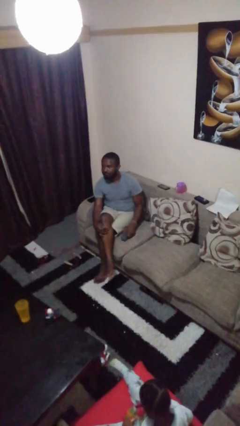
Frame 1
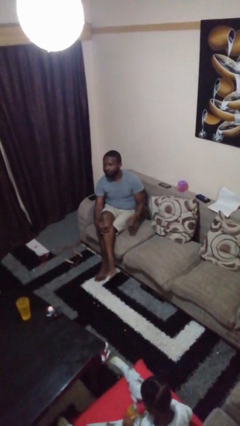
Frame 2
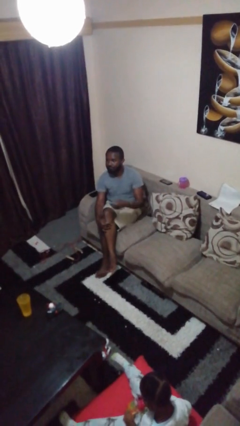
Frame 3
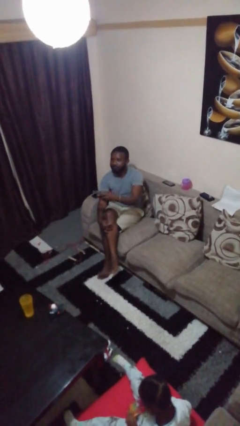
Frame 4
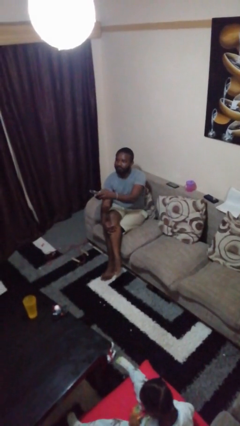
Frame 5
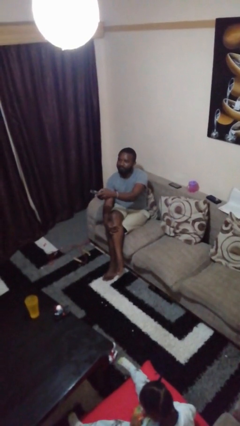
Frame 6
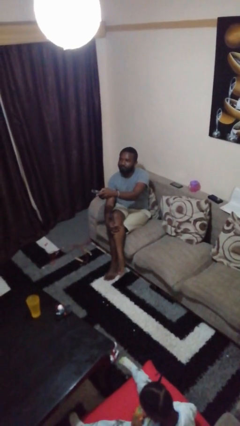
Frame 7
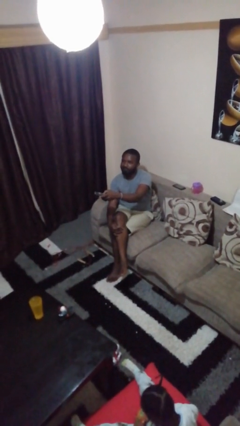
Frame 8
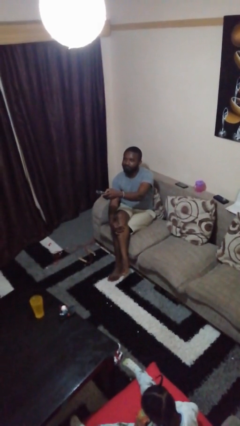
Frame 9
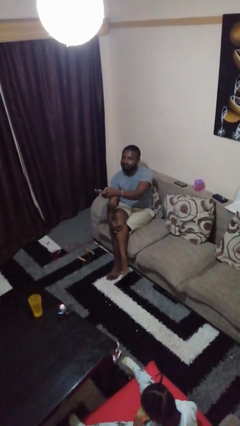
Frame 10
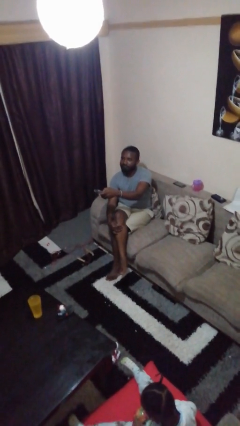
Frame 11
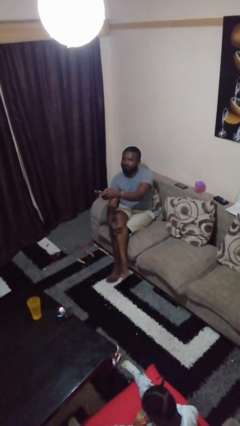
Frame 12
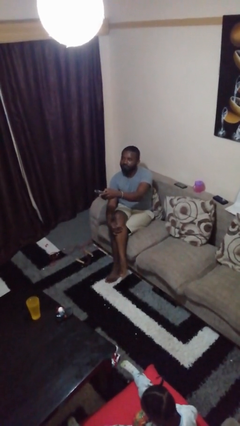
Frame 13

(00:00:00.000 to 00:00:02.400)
person uses television remote

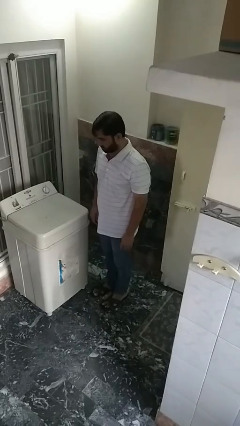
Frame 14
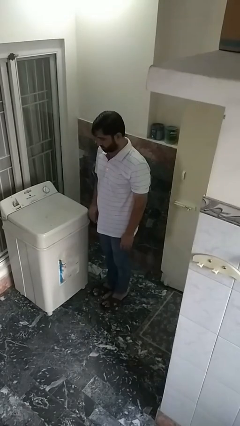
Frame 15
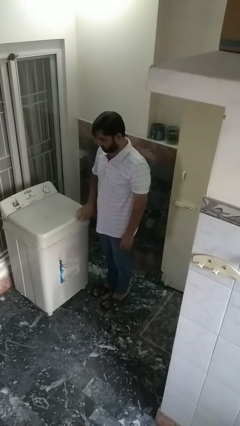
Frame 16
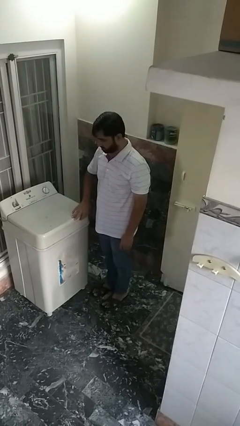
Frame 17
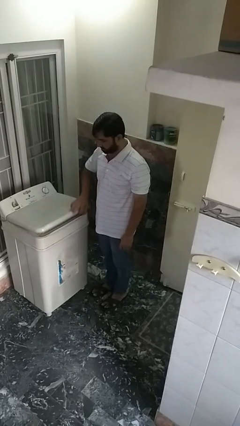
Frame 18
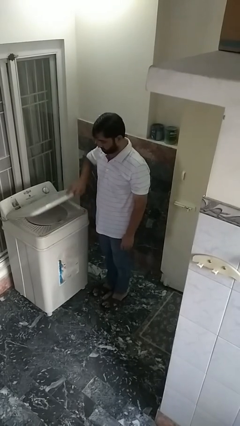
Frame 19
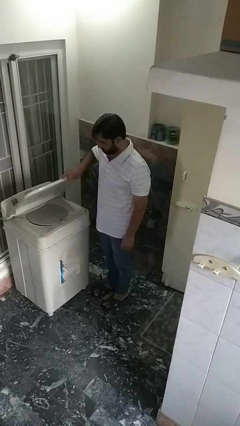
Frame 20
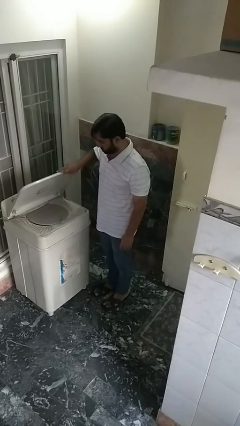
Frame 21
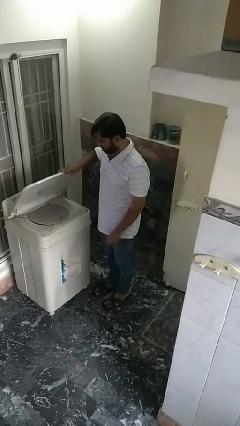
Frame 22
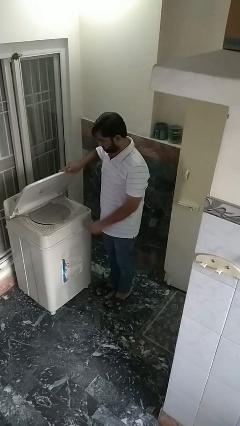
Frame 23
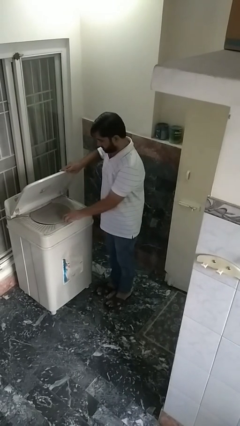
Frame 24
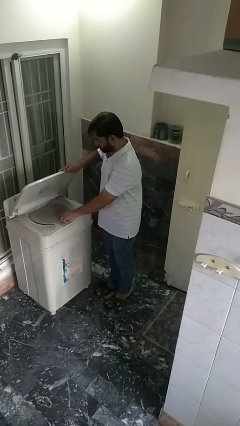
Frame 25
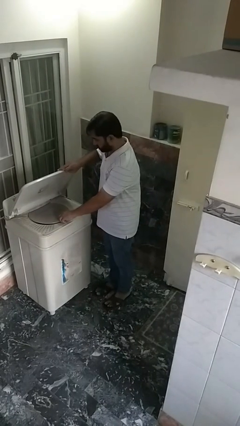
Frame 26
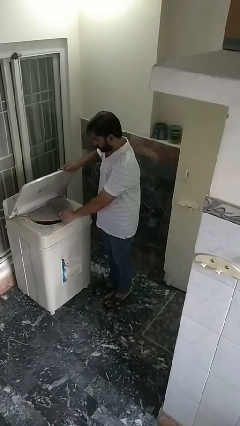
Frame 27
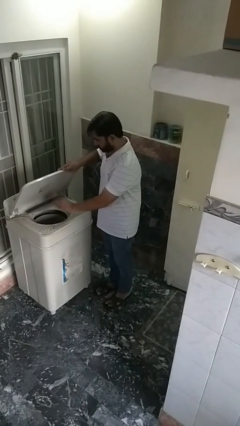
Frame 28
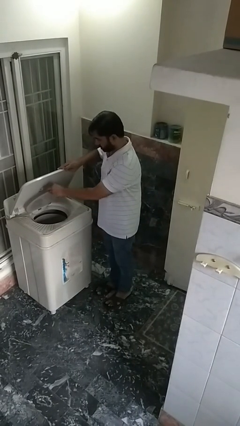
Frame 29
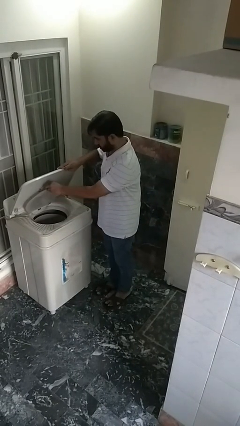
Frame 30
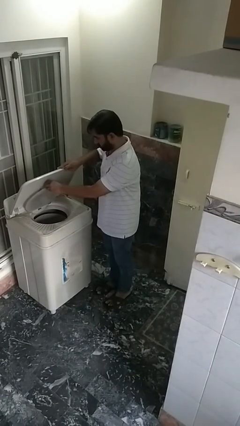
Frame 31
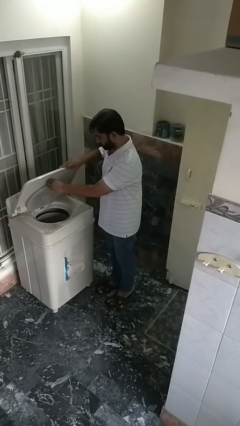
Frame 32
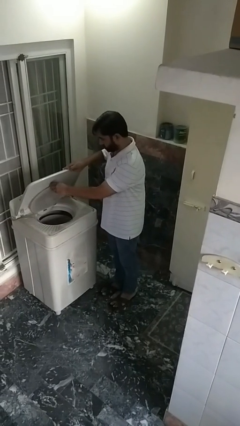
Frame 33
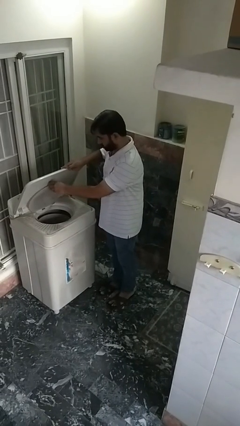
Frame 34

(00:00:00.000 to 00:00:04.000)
person opens clothes washer

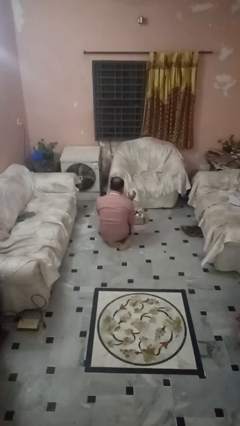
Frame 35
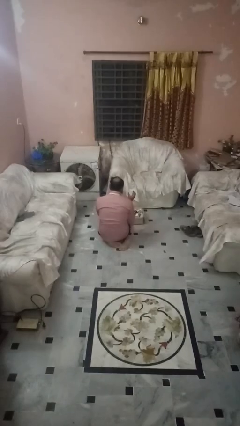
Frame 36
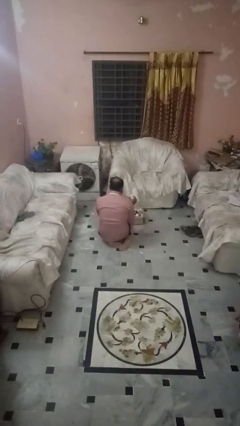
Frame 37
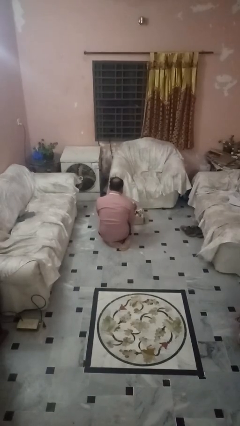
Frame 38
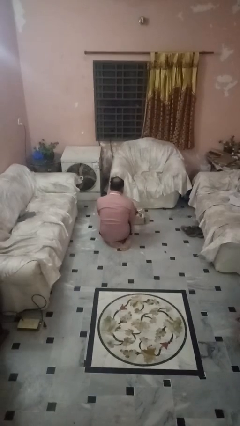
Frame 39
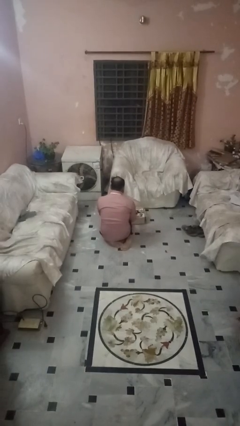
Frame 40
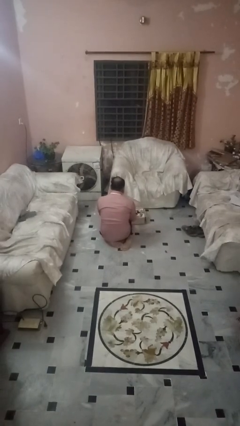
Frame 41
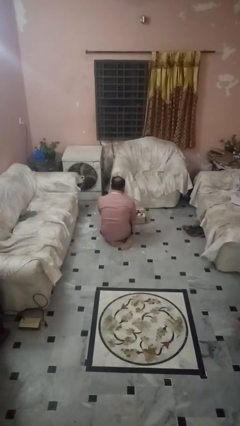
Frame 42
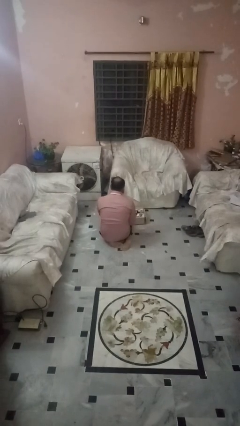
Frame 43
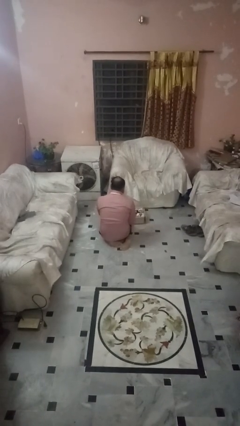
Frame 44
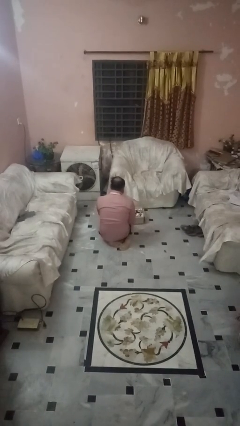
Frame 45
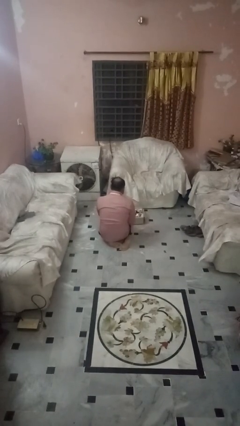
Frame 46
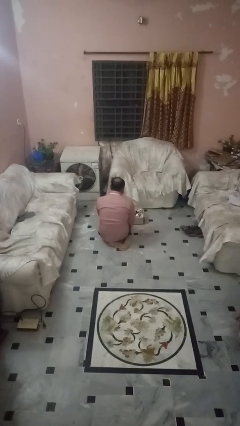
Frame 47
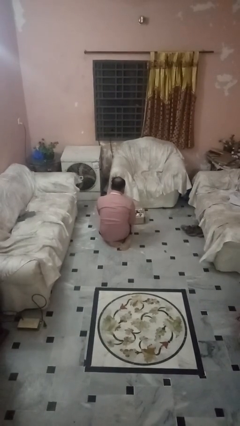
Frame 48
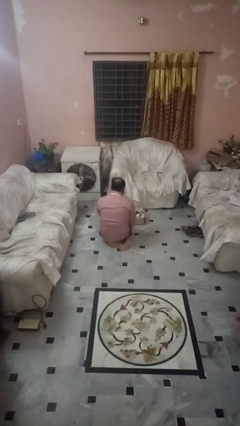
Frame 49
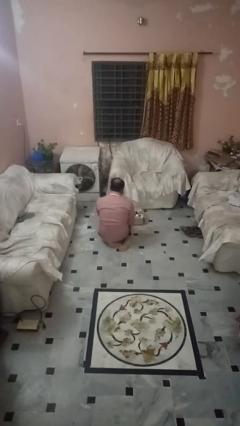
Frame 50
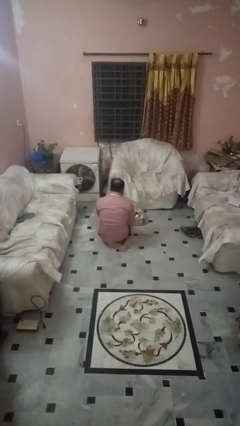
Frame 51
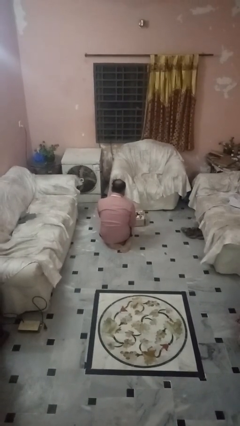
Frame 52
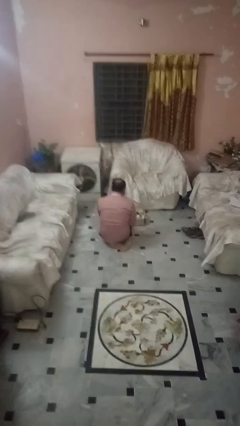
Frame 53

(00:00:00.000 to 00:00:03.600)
person puts object into box

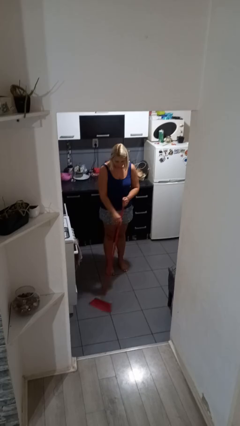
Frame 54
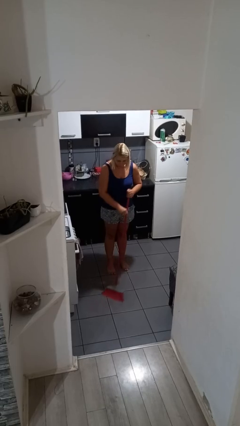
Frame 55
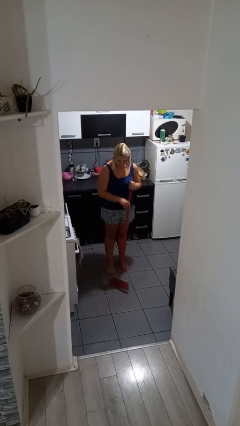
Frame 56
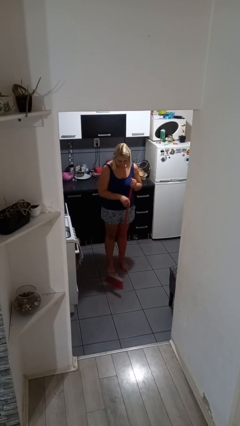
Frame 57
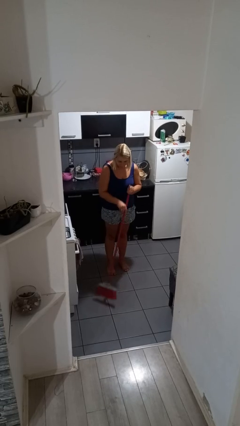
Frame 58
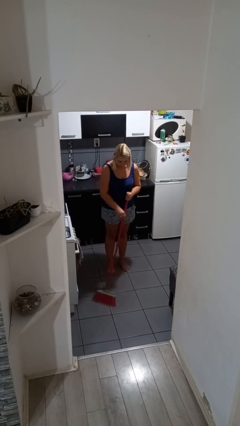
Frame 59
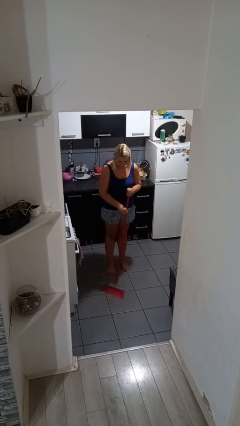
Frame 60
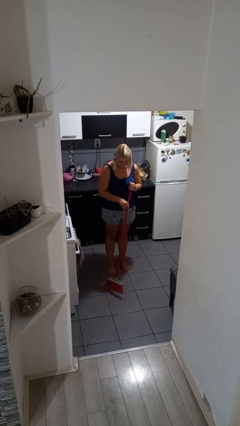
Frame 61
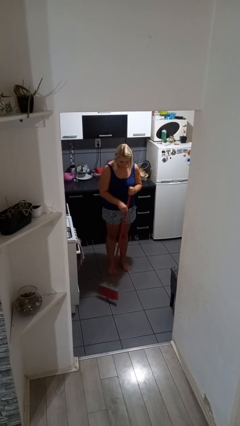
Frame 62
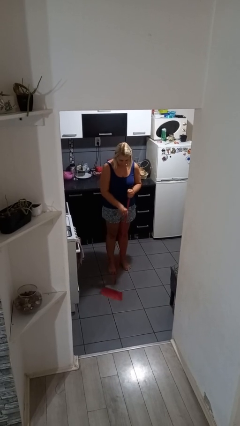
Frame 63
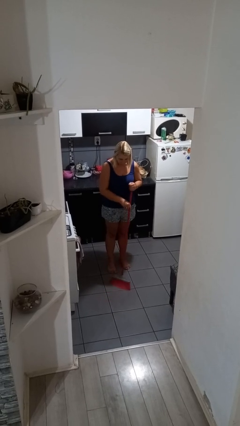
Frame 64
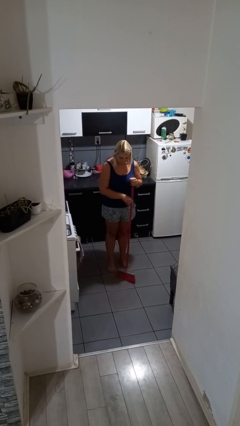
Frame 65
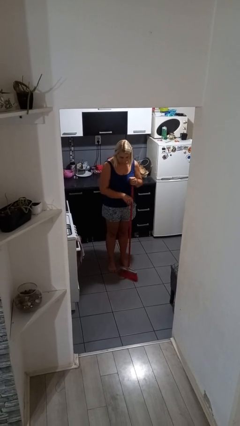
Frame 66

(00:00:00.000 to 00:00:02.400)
person sweeps floor

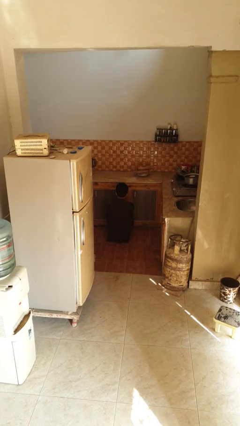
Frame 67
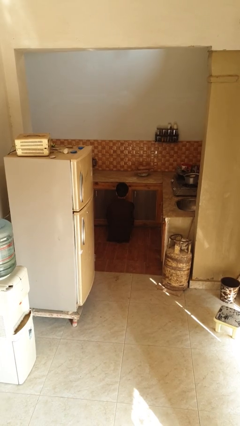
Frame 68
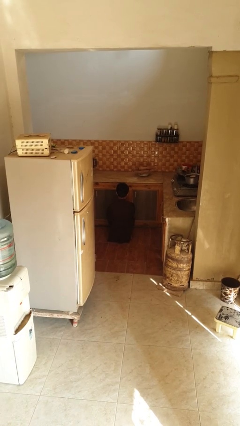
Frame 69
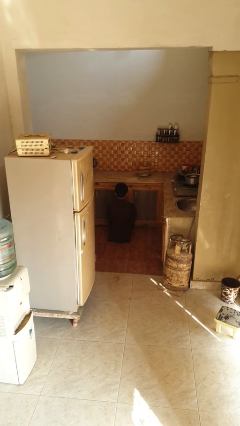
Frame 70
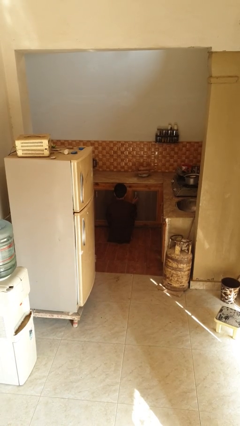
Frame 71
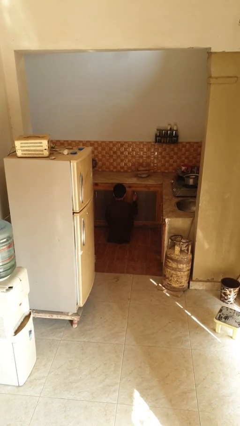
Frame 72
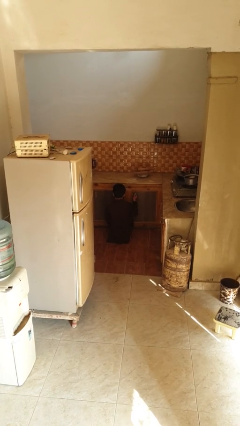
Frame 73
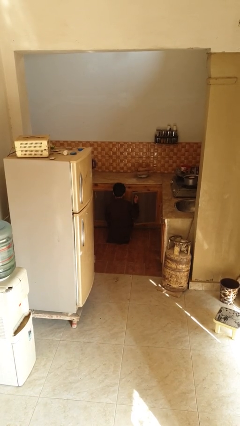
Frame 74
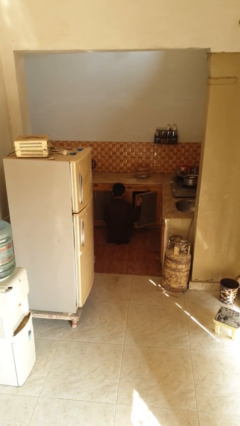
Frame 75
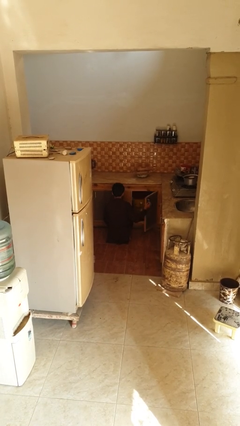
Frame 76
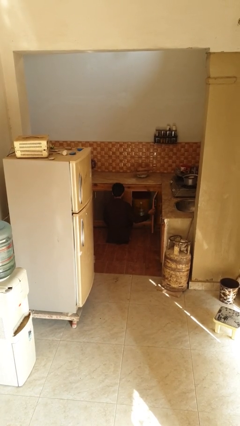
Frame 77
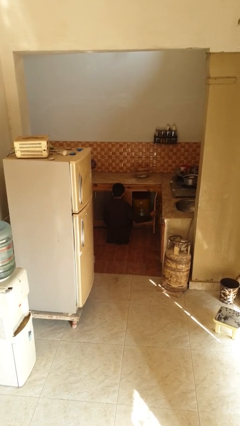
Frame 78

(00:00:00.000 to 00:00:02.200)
person opens kitchen drawer

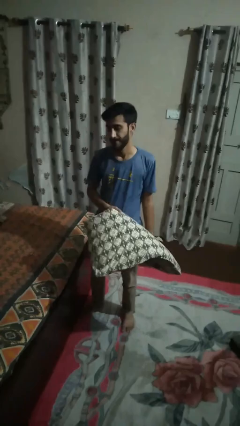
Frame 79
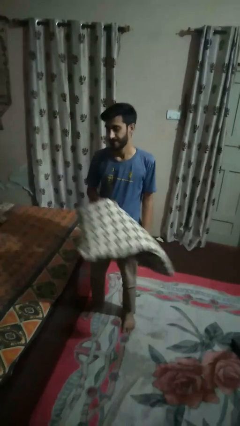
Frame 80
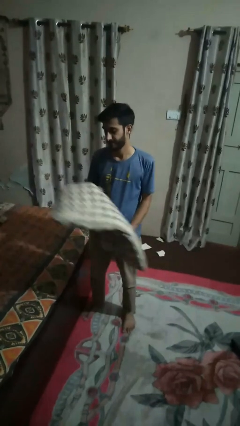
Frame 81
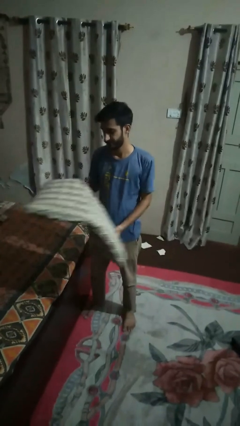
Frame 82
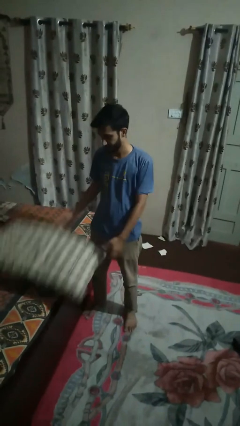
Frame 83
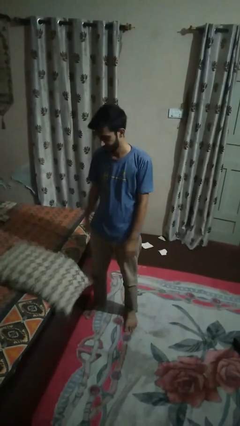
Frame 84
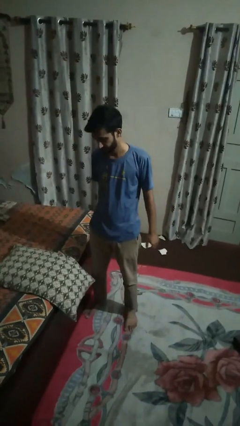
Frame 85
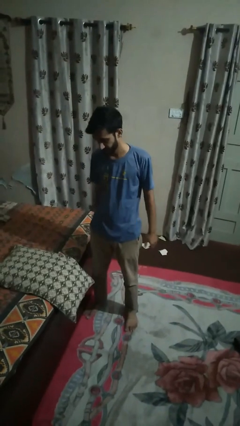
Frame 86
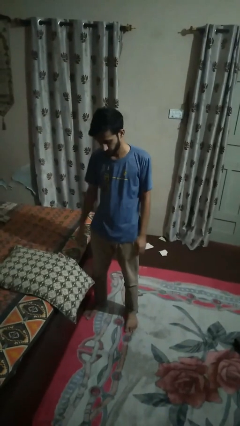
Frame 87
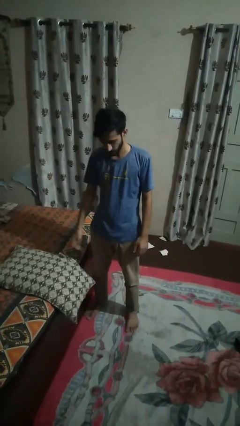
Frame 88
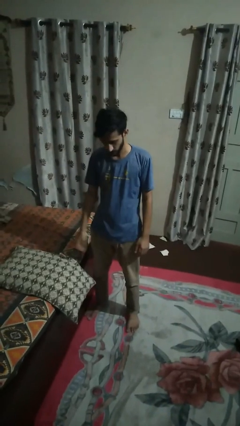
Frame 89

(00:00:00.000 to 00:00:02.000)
person puts down object on bed

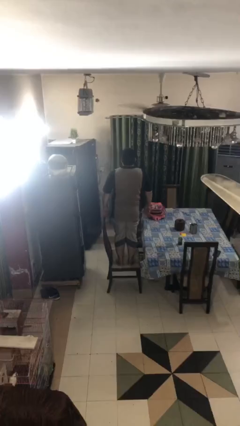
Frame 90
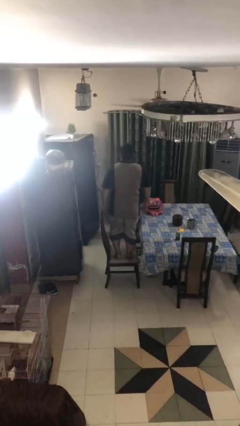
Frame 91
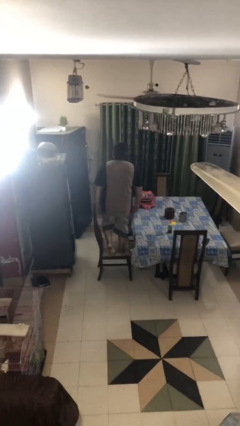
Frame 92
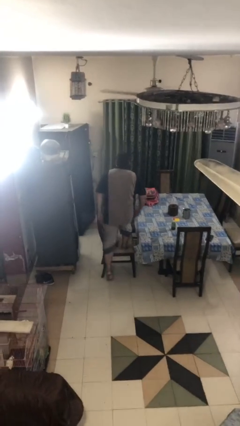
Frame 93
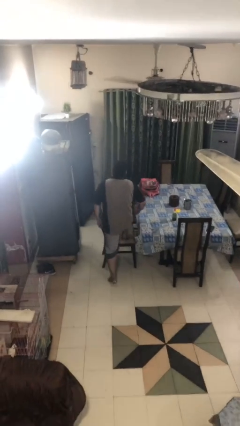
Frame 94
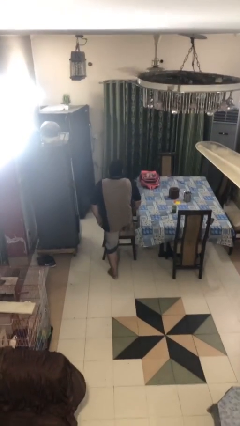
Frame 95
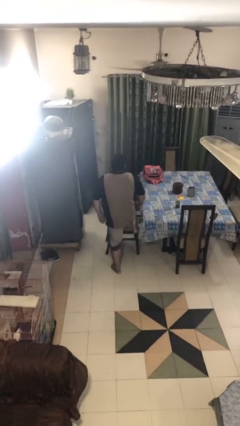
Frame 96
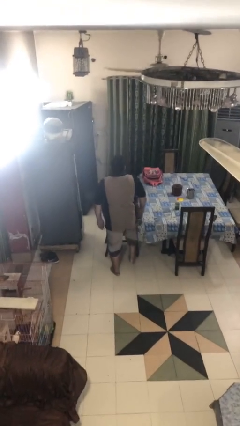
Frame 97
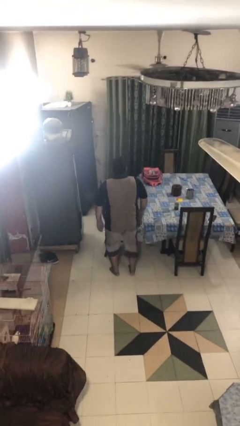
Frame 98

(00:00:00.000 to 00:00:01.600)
person climbs off chair
